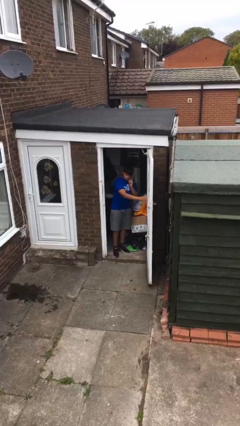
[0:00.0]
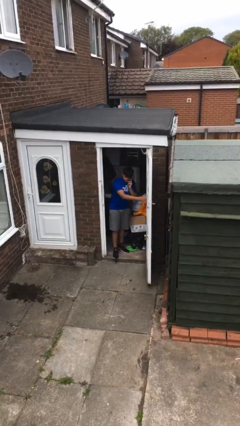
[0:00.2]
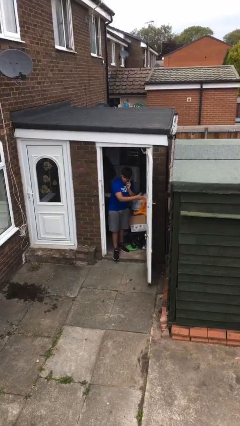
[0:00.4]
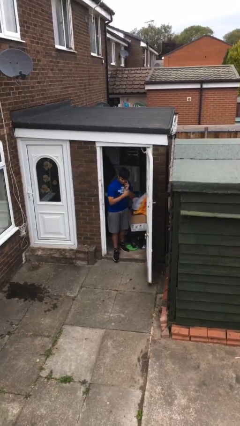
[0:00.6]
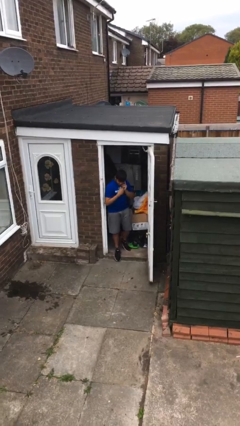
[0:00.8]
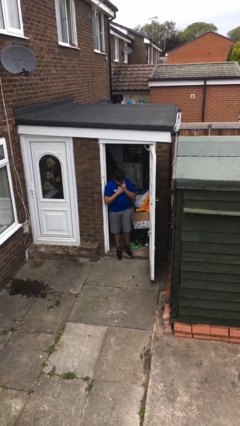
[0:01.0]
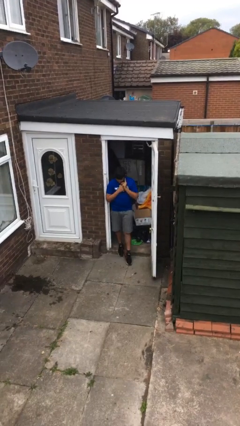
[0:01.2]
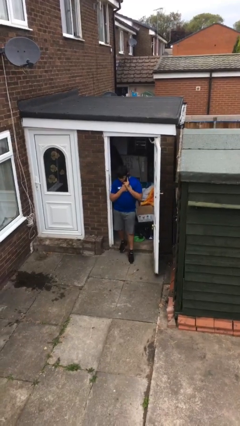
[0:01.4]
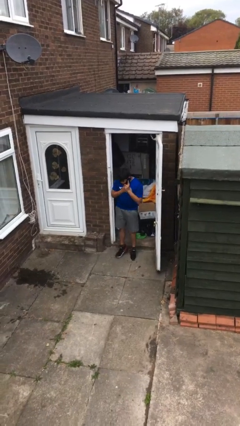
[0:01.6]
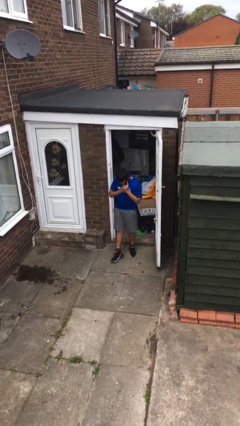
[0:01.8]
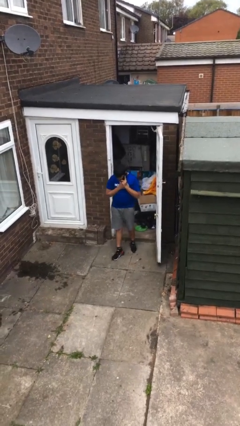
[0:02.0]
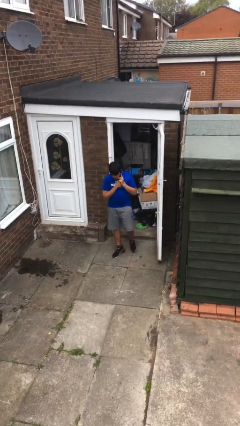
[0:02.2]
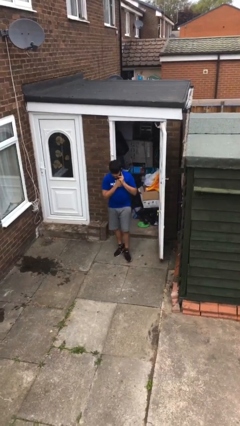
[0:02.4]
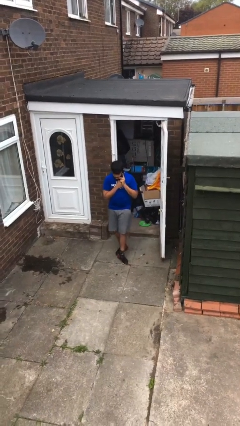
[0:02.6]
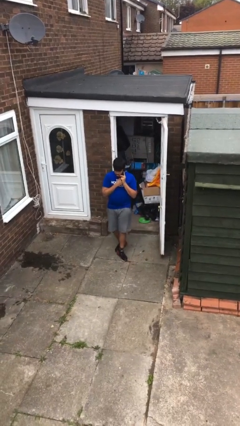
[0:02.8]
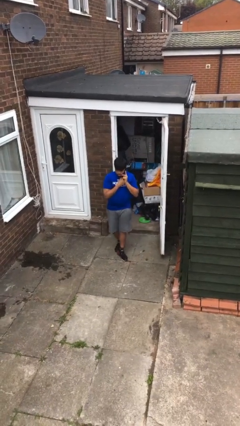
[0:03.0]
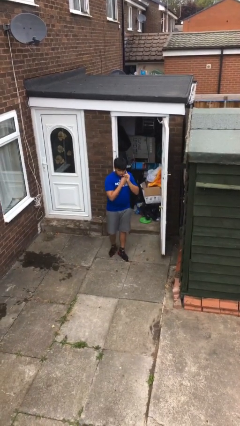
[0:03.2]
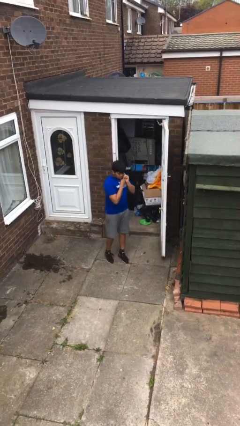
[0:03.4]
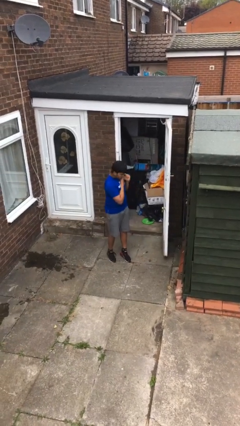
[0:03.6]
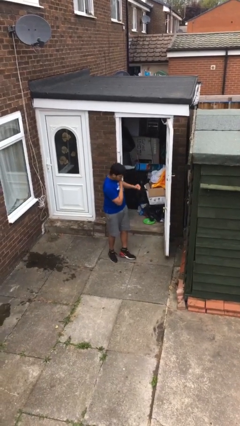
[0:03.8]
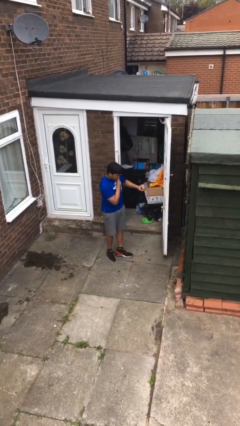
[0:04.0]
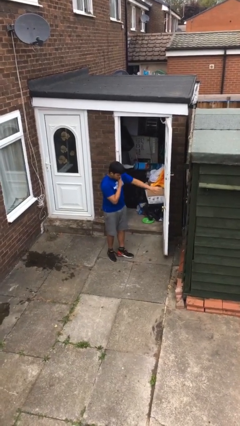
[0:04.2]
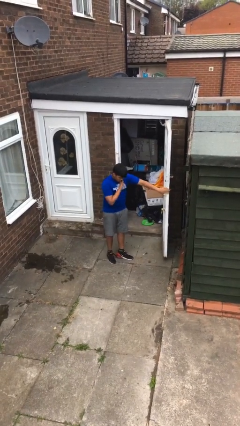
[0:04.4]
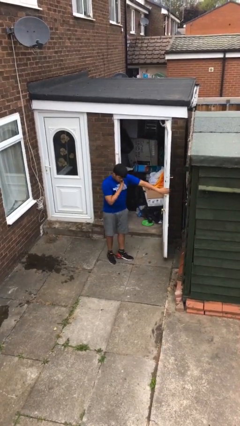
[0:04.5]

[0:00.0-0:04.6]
person enters scene through structure

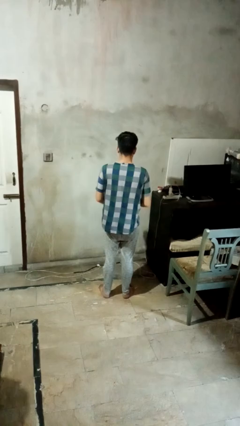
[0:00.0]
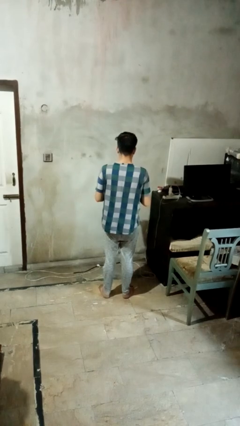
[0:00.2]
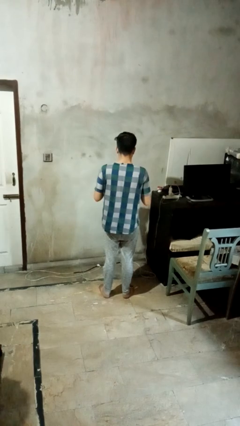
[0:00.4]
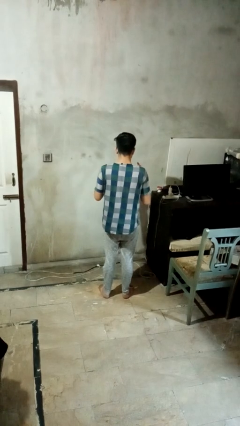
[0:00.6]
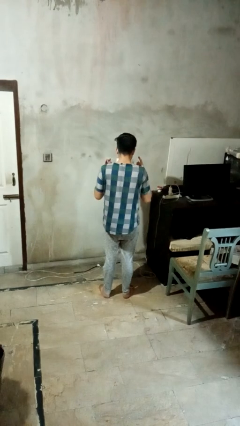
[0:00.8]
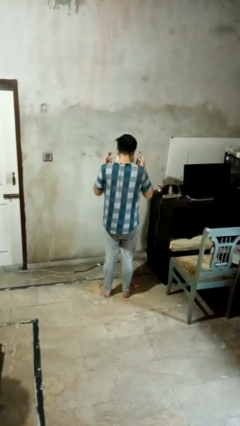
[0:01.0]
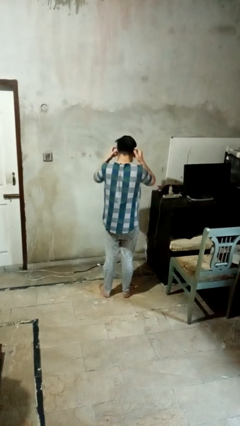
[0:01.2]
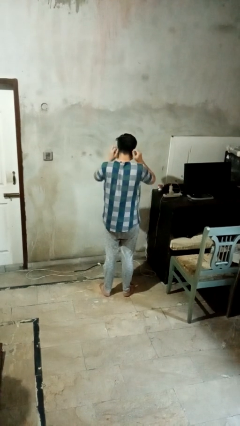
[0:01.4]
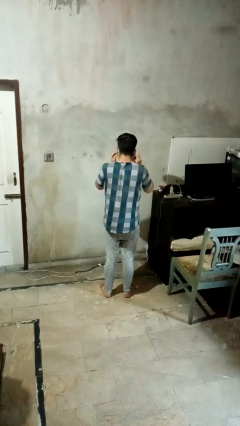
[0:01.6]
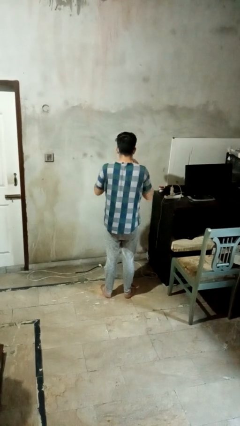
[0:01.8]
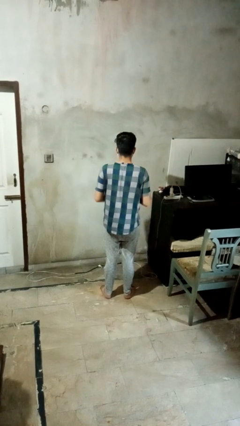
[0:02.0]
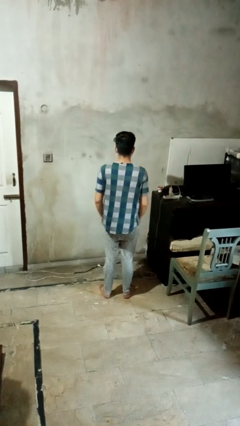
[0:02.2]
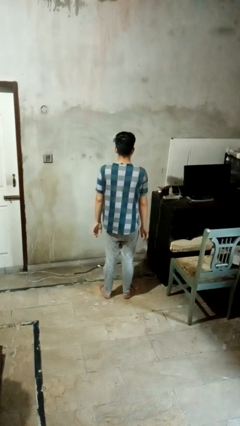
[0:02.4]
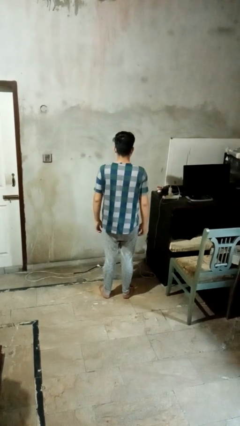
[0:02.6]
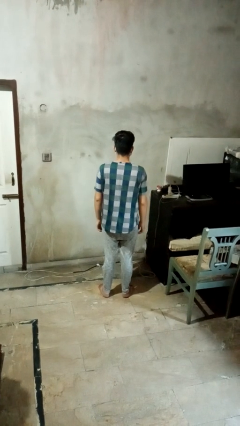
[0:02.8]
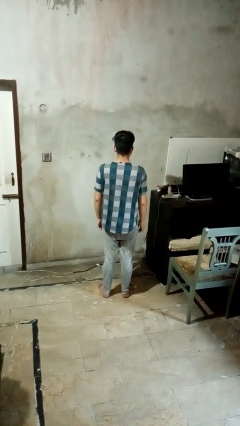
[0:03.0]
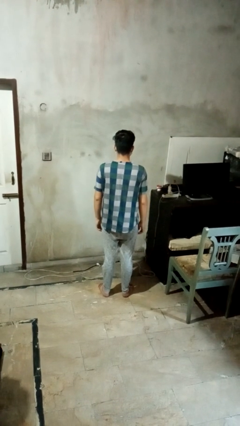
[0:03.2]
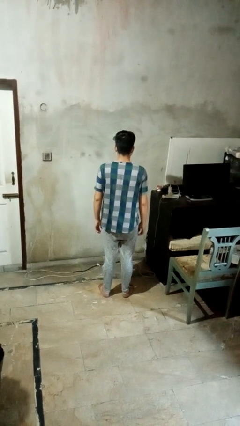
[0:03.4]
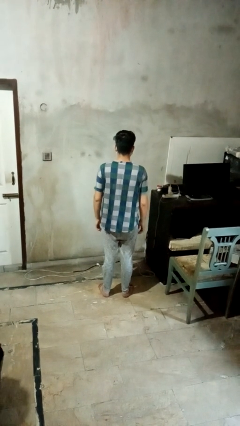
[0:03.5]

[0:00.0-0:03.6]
person puts on facemask

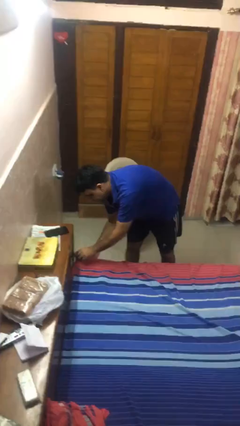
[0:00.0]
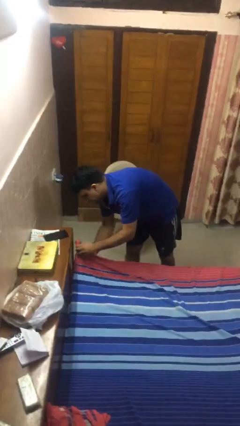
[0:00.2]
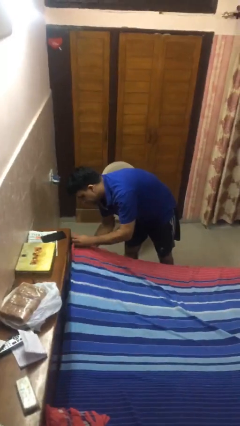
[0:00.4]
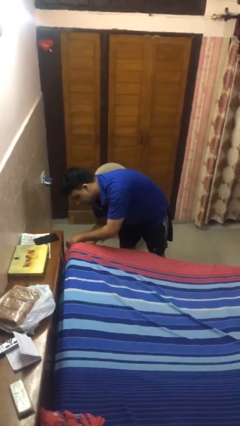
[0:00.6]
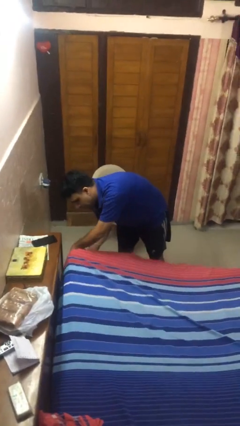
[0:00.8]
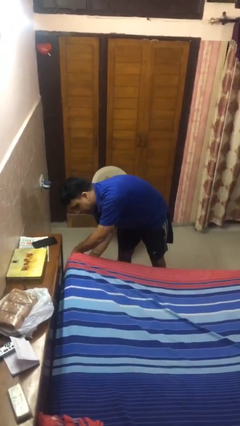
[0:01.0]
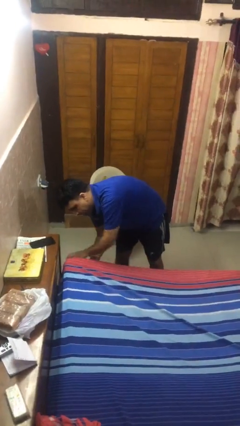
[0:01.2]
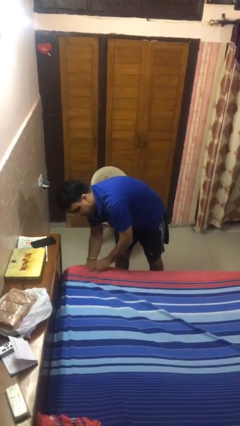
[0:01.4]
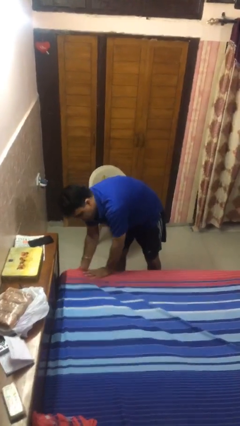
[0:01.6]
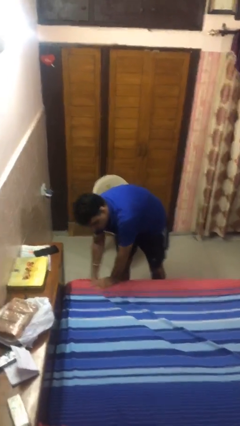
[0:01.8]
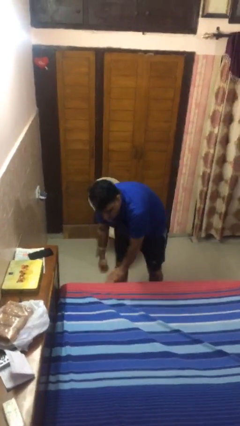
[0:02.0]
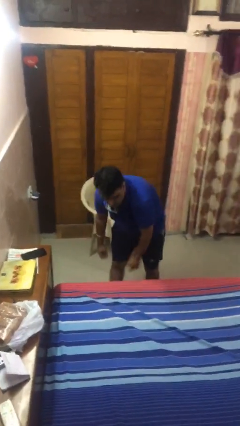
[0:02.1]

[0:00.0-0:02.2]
person makes bed

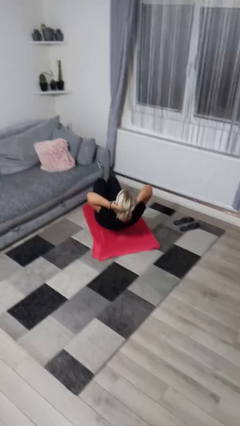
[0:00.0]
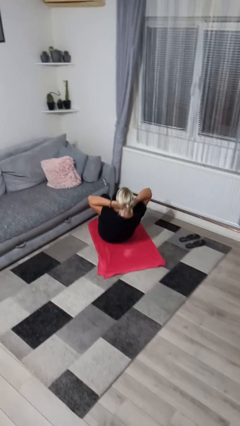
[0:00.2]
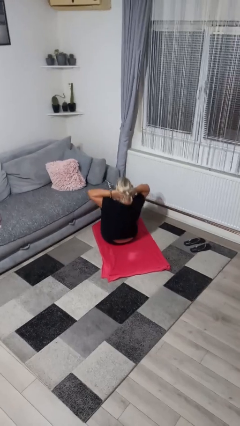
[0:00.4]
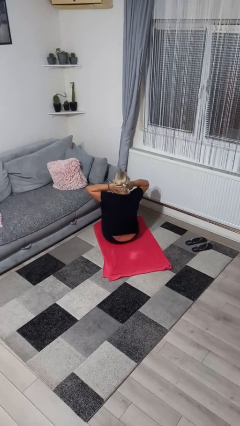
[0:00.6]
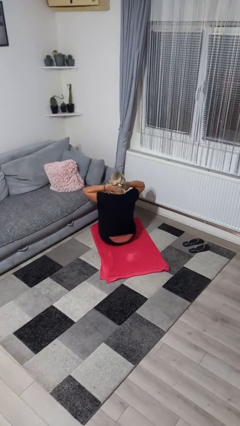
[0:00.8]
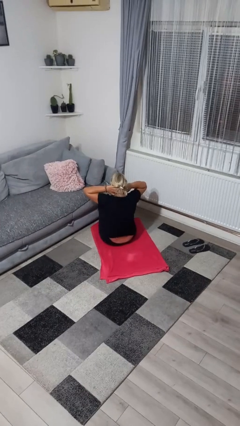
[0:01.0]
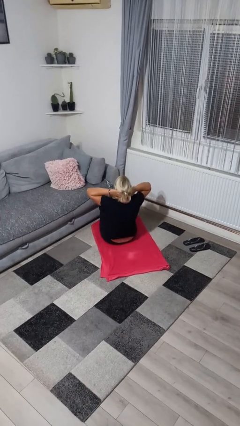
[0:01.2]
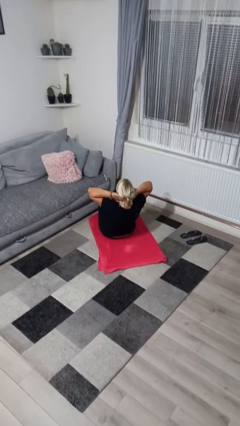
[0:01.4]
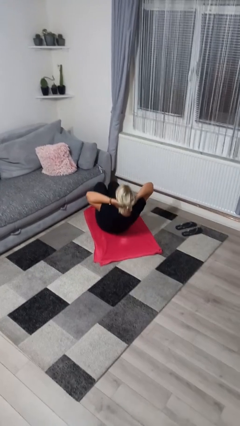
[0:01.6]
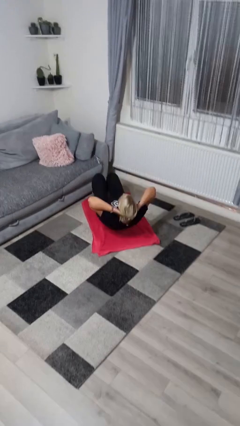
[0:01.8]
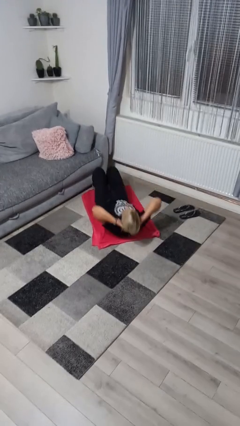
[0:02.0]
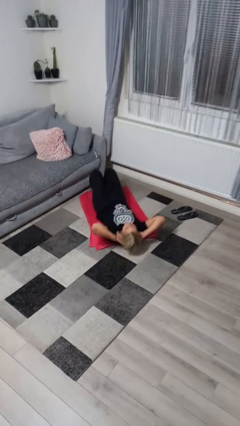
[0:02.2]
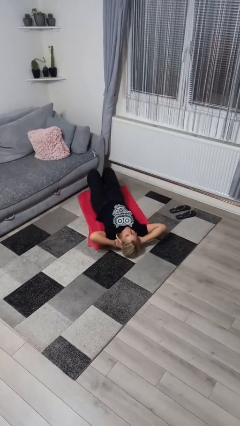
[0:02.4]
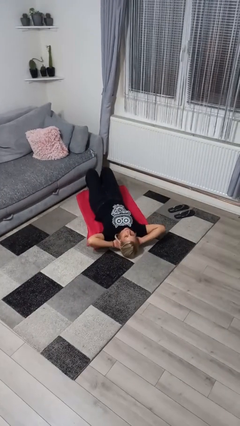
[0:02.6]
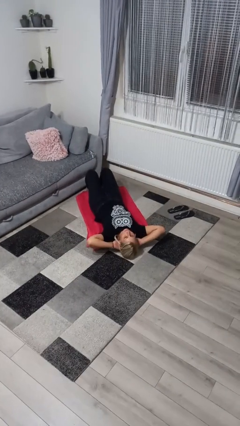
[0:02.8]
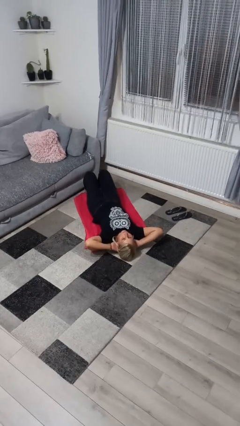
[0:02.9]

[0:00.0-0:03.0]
person exercises with situp

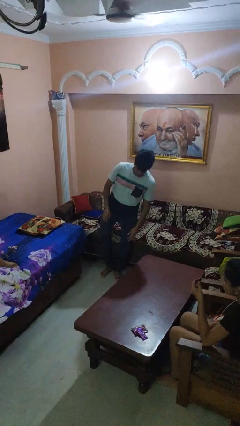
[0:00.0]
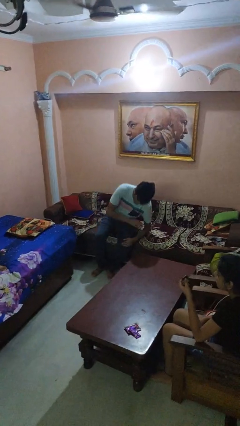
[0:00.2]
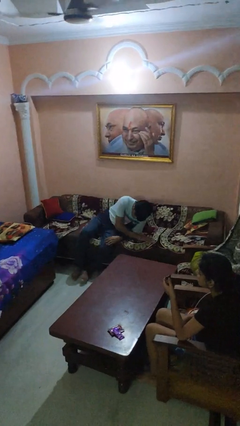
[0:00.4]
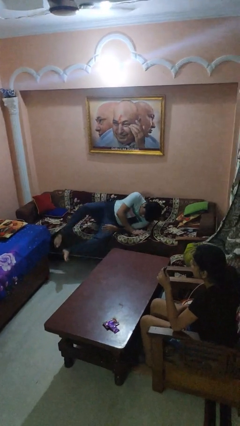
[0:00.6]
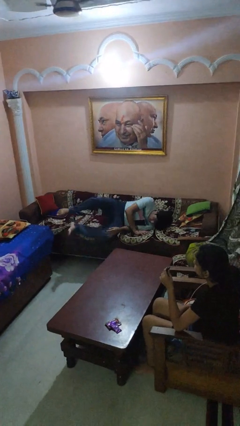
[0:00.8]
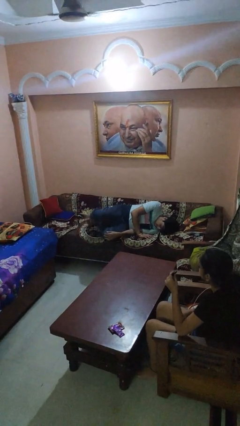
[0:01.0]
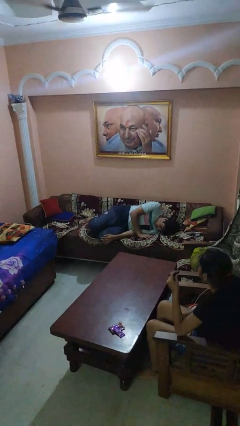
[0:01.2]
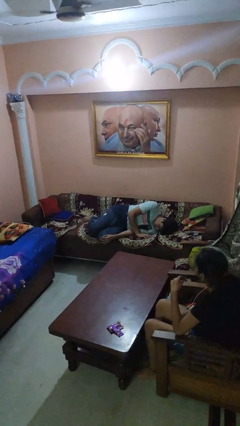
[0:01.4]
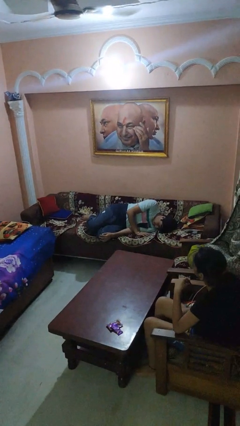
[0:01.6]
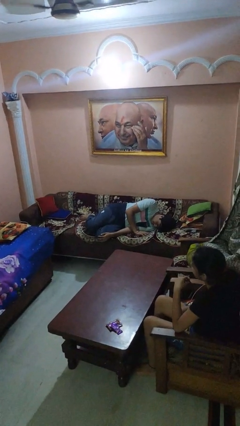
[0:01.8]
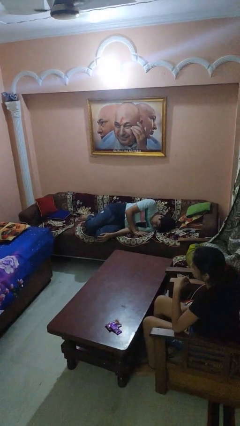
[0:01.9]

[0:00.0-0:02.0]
person lies down on couch

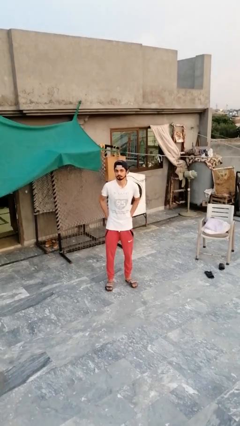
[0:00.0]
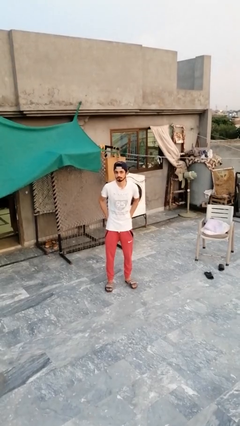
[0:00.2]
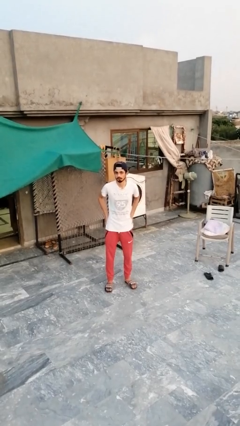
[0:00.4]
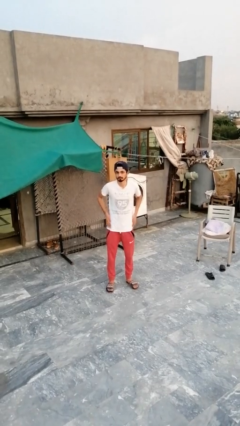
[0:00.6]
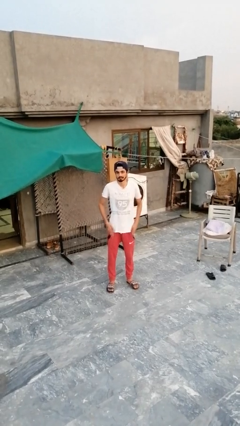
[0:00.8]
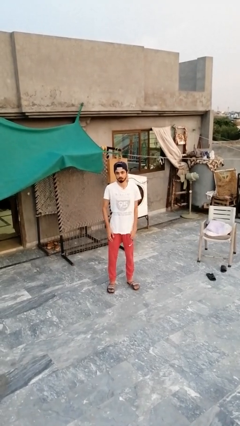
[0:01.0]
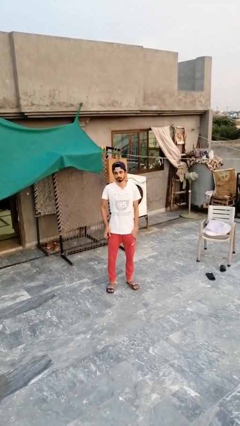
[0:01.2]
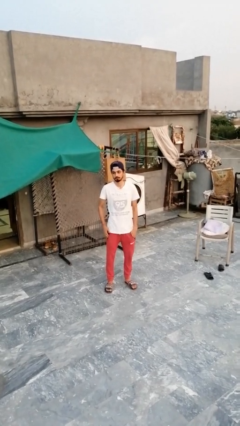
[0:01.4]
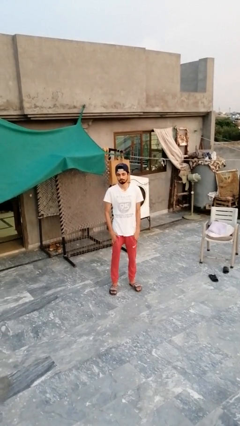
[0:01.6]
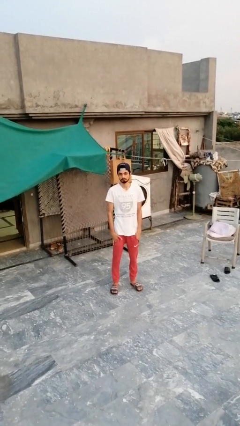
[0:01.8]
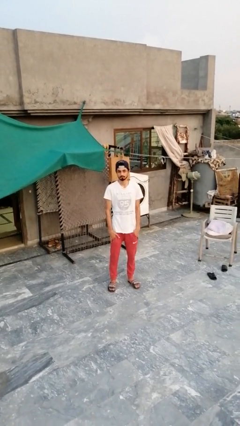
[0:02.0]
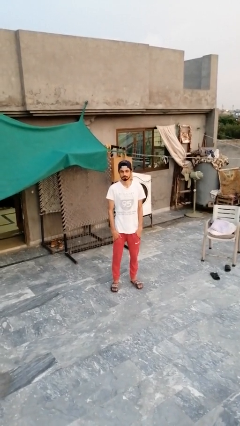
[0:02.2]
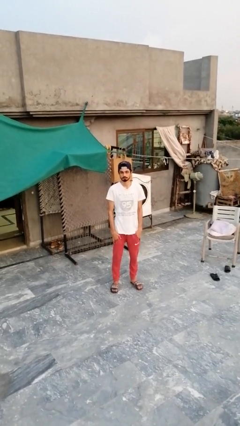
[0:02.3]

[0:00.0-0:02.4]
person puts hands in back pockets
